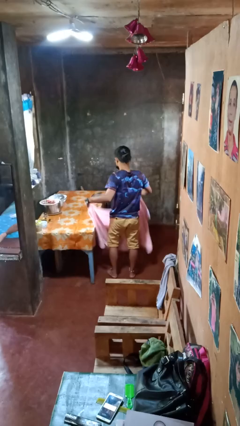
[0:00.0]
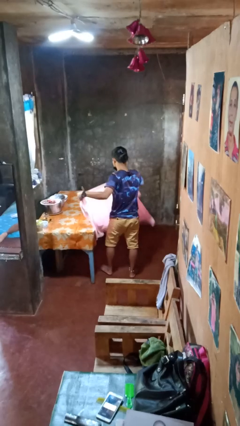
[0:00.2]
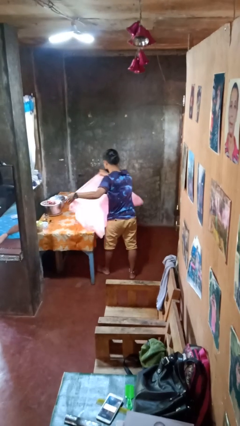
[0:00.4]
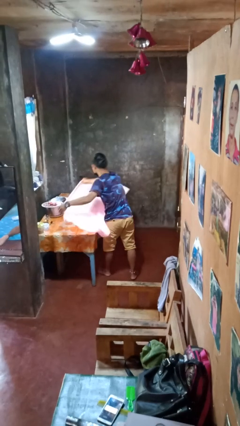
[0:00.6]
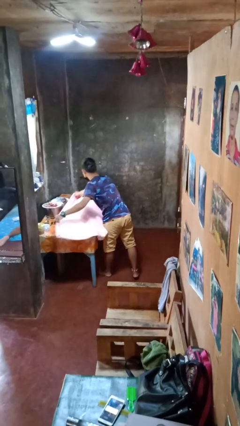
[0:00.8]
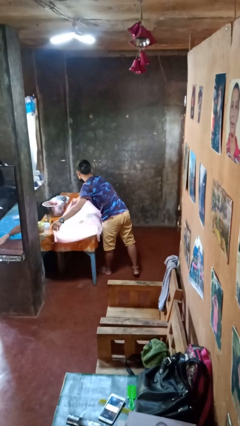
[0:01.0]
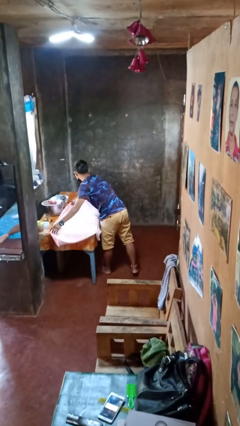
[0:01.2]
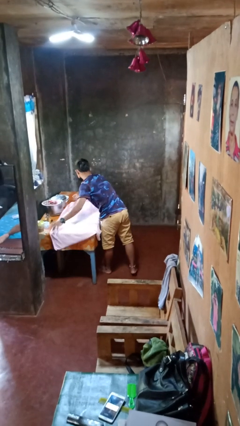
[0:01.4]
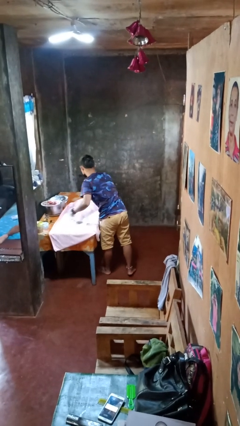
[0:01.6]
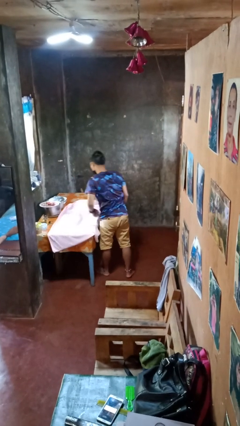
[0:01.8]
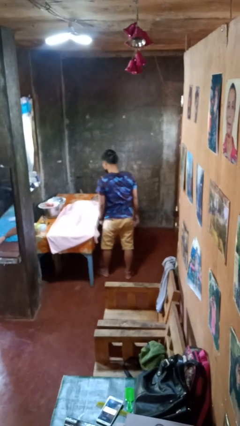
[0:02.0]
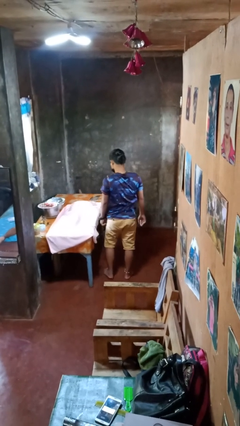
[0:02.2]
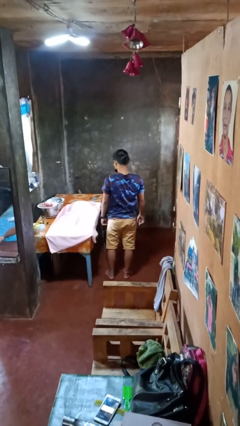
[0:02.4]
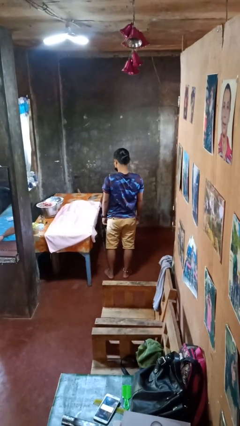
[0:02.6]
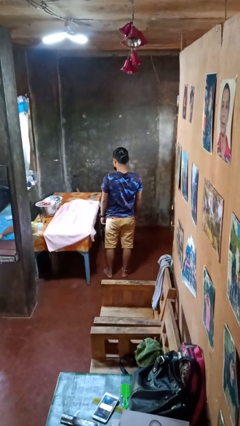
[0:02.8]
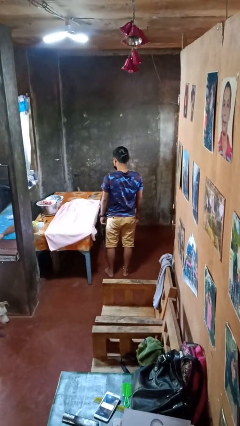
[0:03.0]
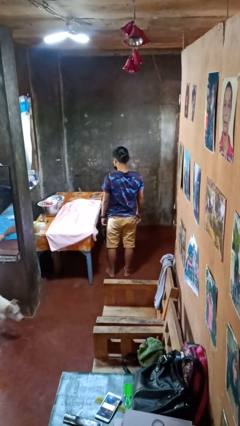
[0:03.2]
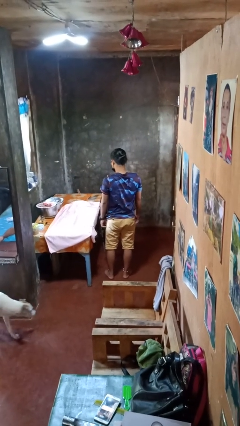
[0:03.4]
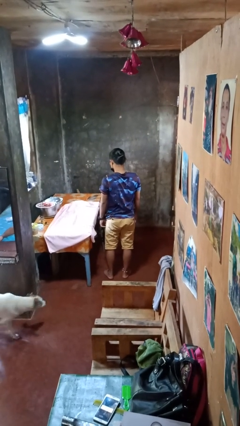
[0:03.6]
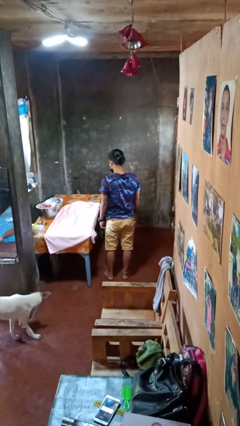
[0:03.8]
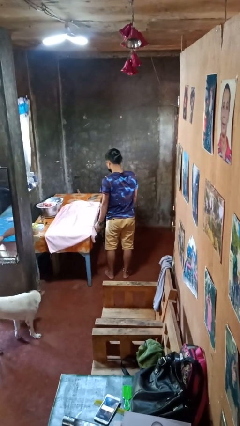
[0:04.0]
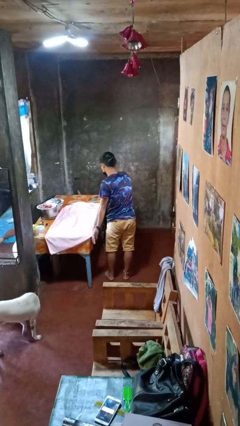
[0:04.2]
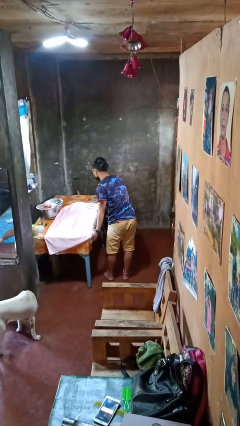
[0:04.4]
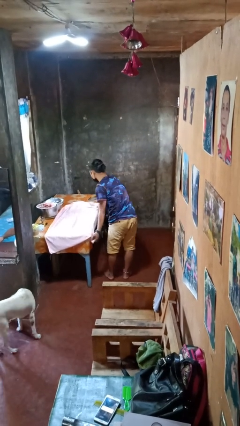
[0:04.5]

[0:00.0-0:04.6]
person spreads tablecloth

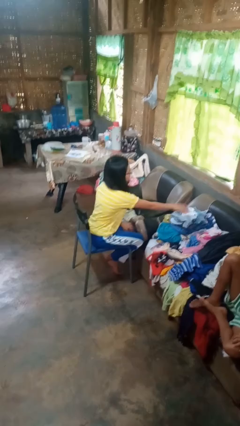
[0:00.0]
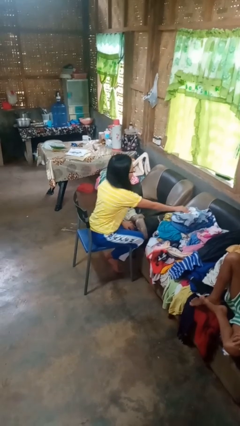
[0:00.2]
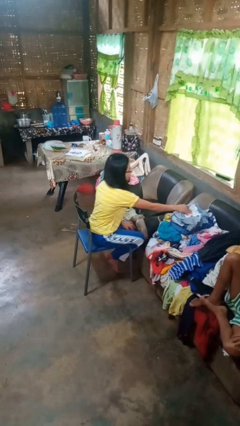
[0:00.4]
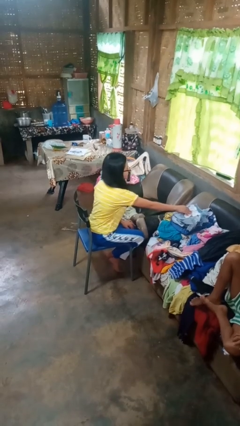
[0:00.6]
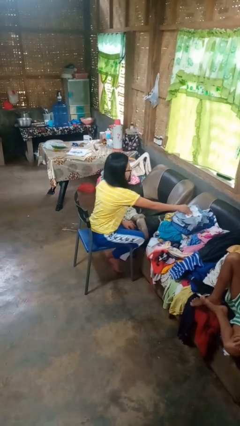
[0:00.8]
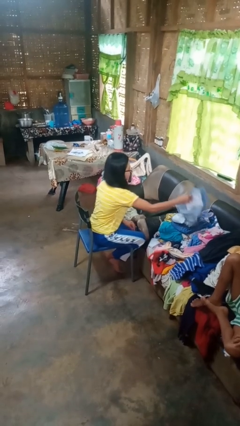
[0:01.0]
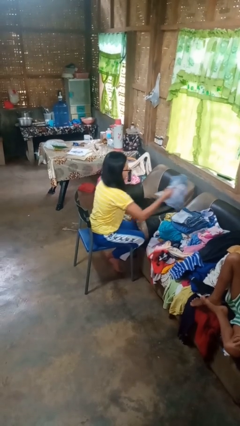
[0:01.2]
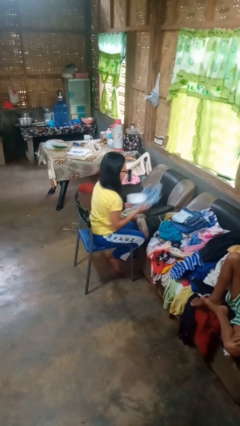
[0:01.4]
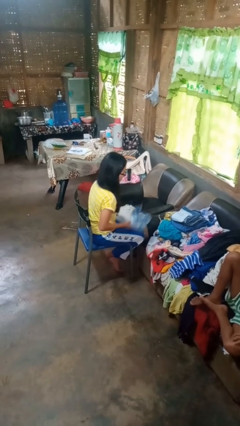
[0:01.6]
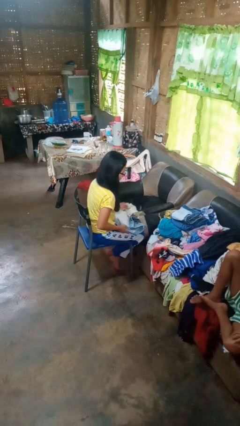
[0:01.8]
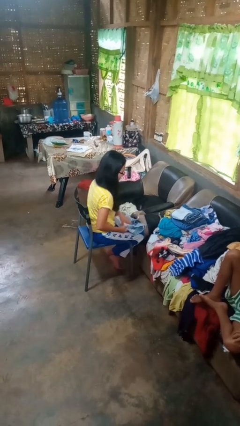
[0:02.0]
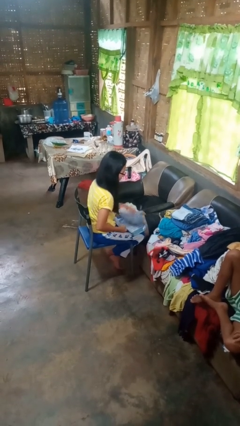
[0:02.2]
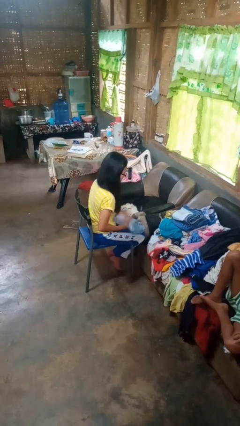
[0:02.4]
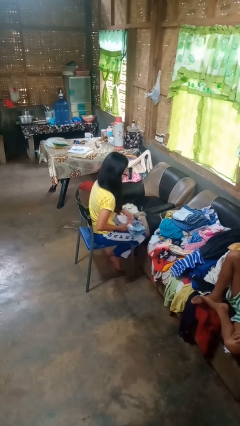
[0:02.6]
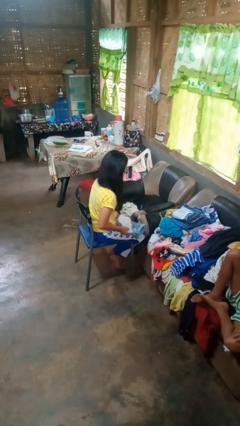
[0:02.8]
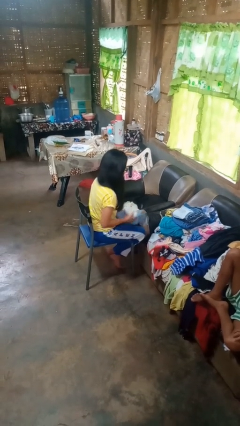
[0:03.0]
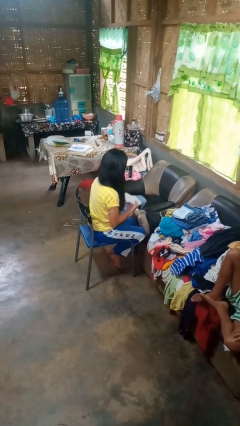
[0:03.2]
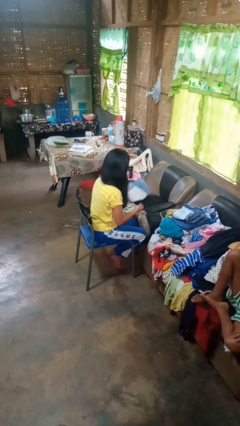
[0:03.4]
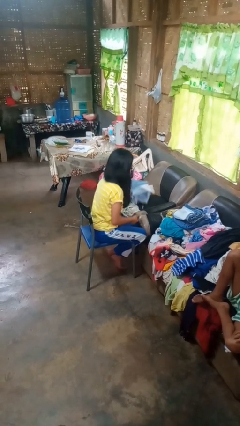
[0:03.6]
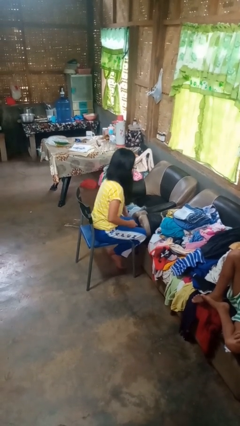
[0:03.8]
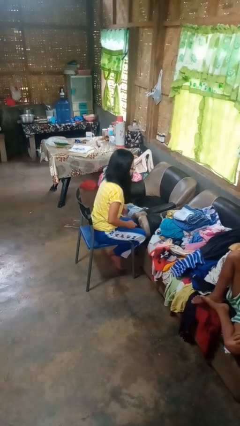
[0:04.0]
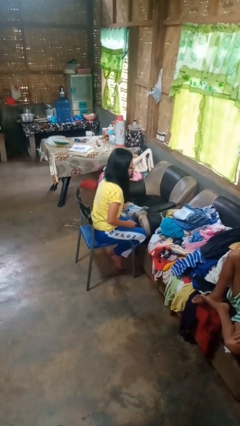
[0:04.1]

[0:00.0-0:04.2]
person folds pants

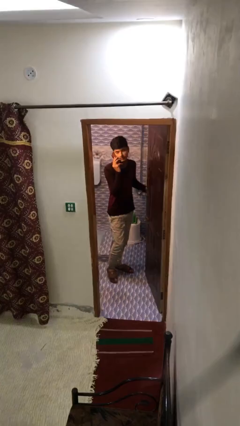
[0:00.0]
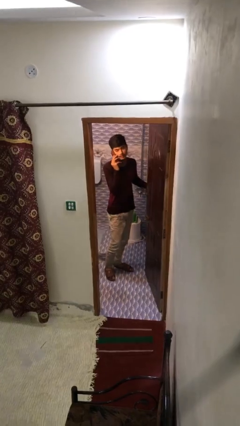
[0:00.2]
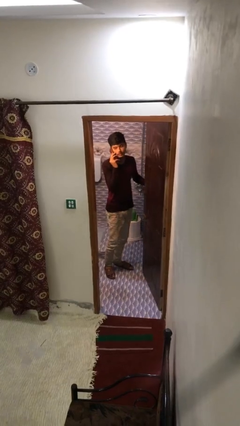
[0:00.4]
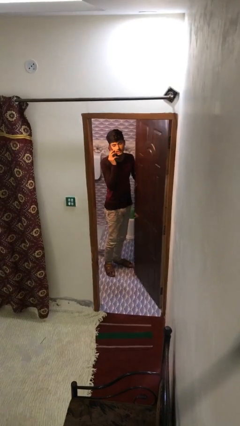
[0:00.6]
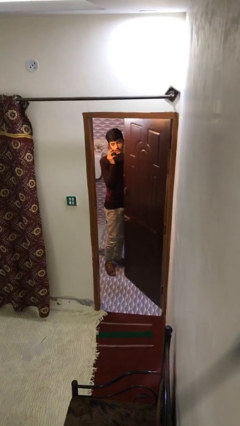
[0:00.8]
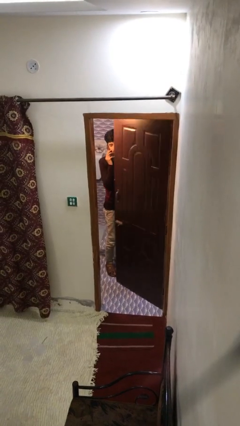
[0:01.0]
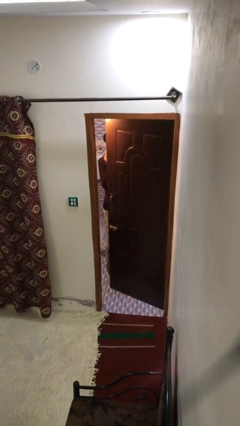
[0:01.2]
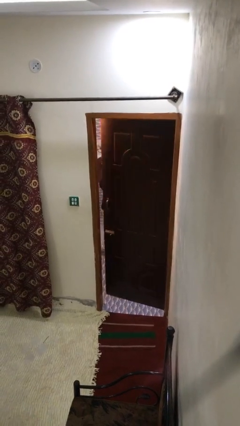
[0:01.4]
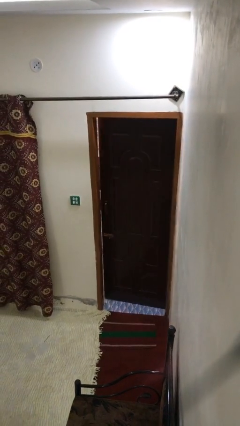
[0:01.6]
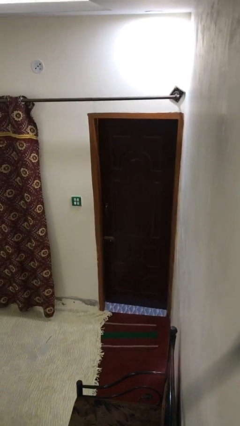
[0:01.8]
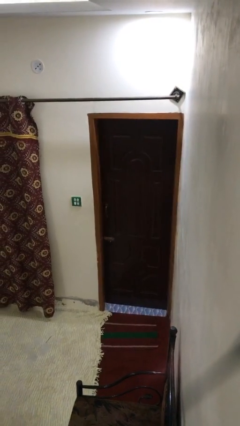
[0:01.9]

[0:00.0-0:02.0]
person closes facility door

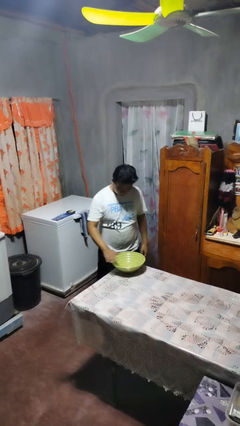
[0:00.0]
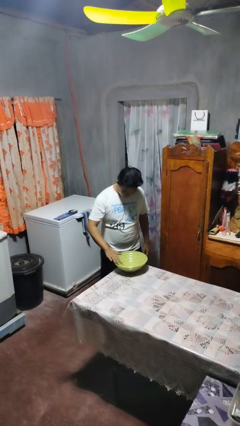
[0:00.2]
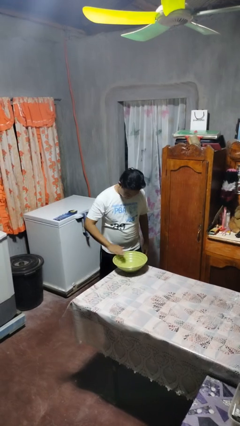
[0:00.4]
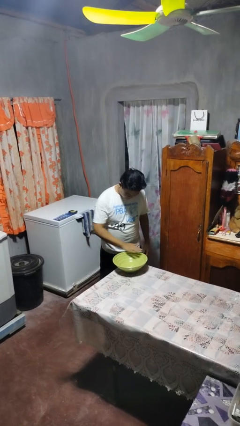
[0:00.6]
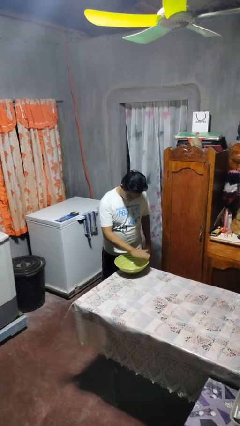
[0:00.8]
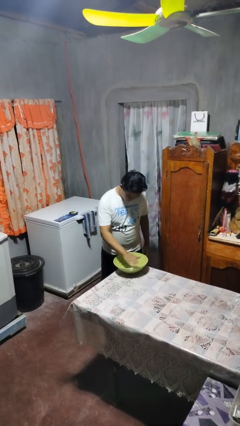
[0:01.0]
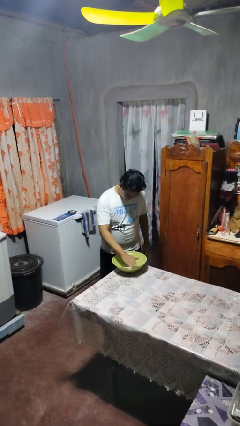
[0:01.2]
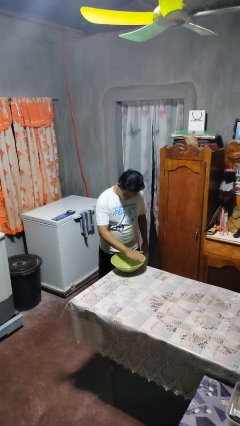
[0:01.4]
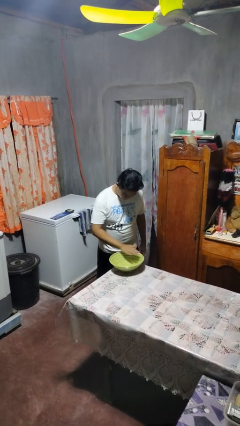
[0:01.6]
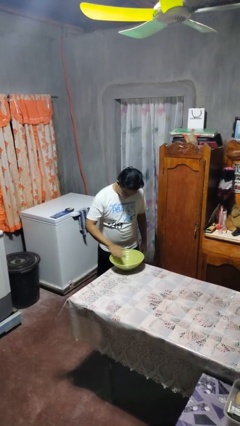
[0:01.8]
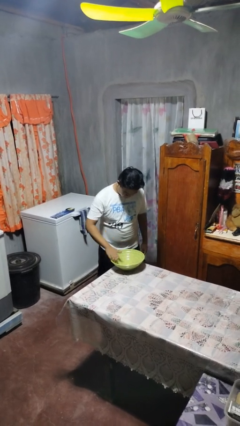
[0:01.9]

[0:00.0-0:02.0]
person waves hand over object

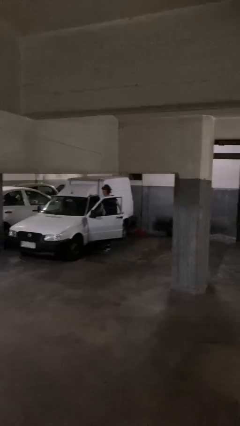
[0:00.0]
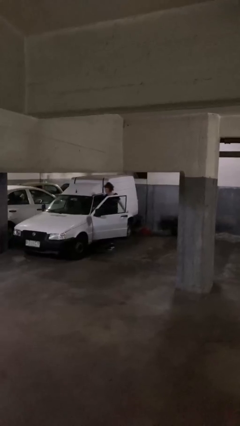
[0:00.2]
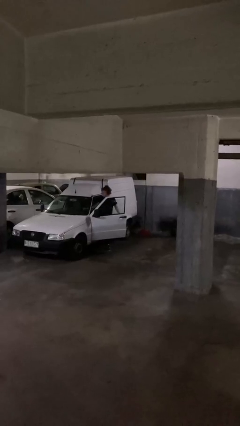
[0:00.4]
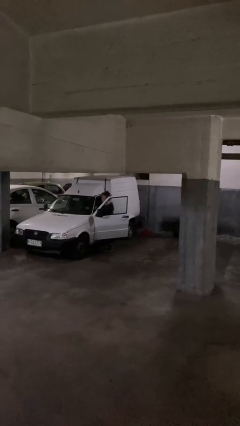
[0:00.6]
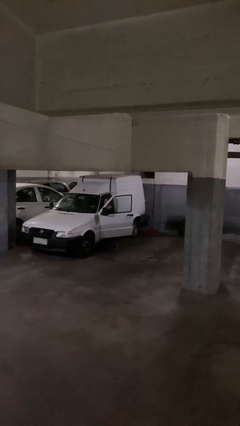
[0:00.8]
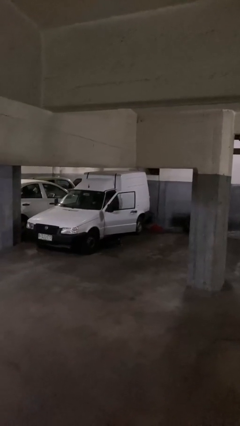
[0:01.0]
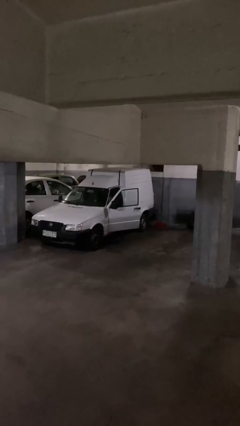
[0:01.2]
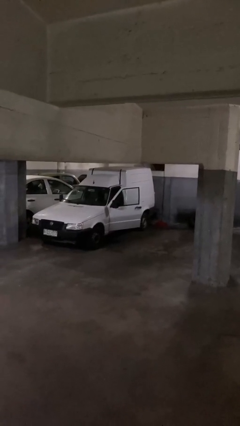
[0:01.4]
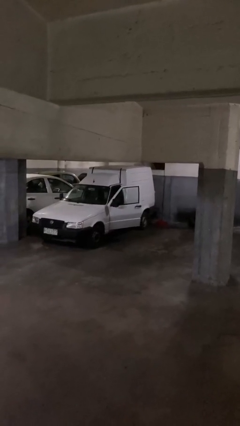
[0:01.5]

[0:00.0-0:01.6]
person enters car

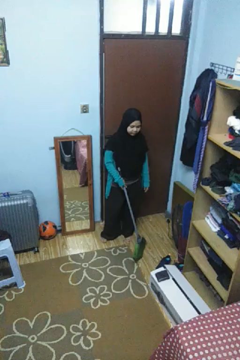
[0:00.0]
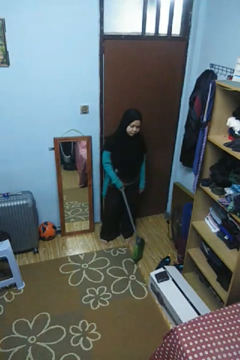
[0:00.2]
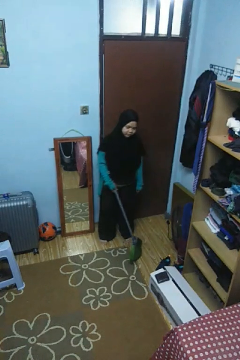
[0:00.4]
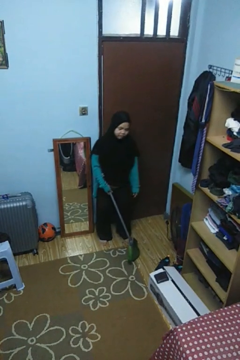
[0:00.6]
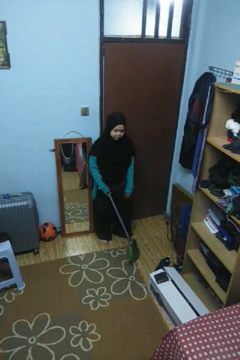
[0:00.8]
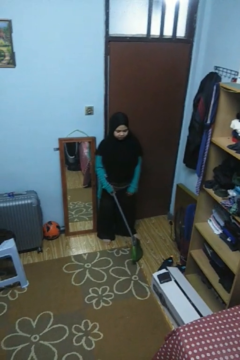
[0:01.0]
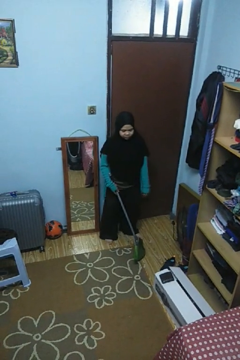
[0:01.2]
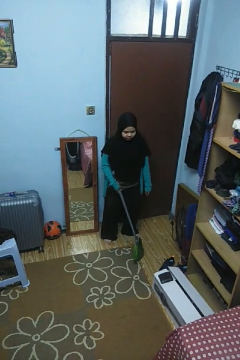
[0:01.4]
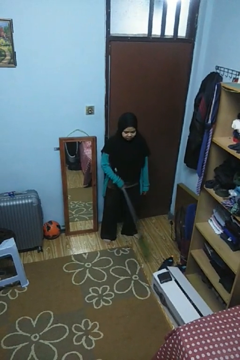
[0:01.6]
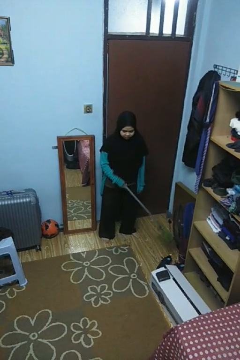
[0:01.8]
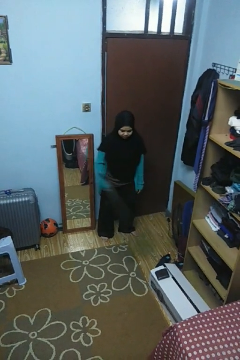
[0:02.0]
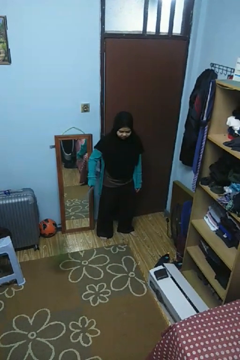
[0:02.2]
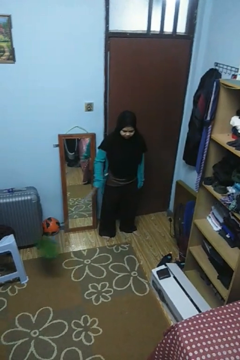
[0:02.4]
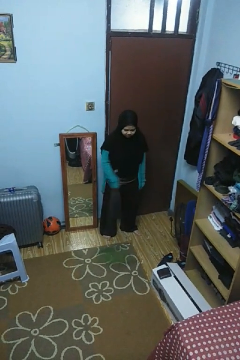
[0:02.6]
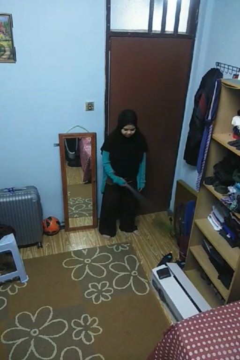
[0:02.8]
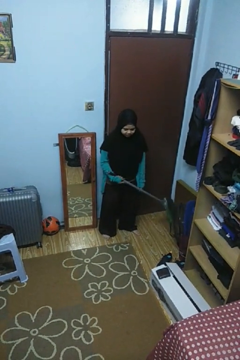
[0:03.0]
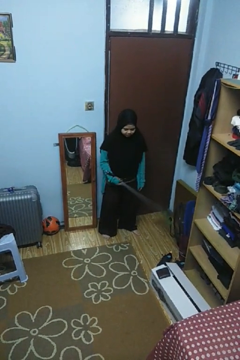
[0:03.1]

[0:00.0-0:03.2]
person sweeps floor

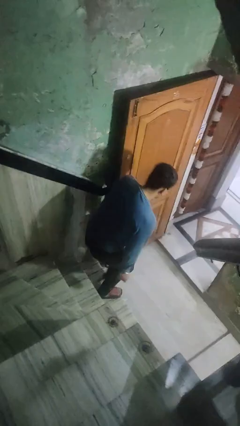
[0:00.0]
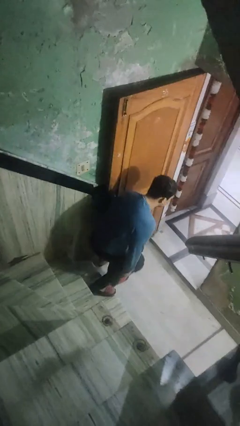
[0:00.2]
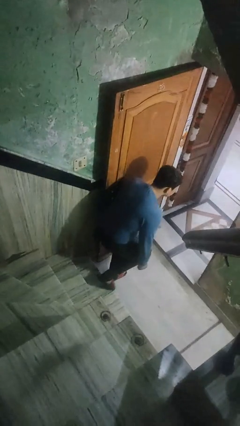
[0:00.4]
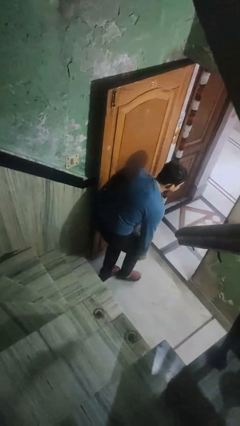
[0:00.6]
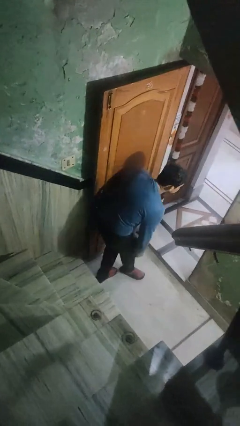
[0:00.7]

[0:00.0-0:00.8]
person trips on stair
